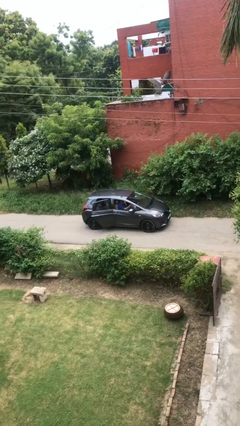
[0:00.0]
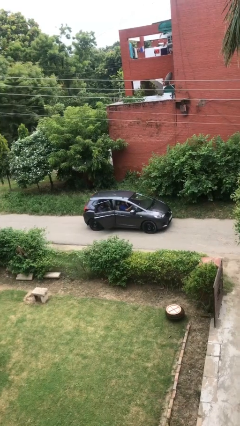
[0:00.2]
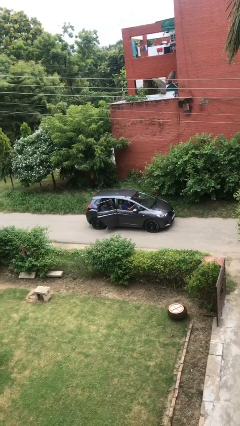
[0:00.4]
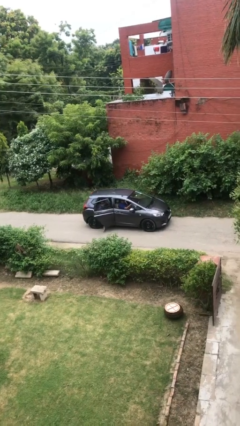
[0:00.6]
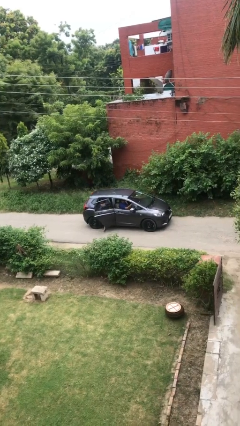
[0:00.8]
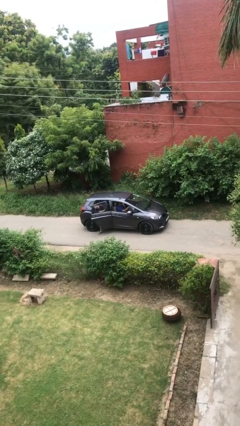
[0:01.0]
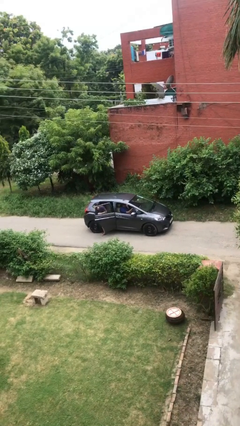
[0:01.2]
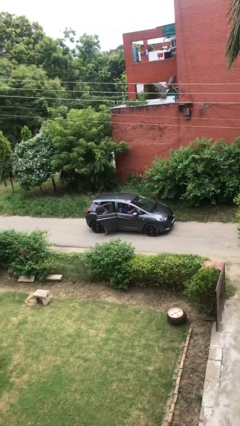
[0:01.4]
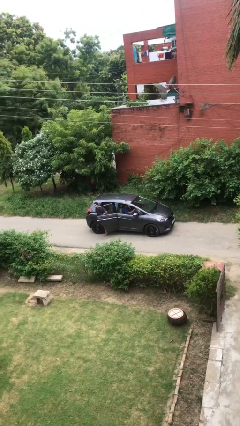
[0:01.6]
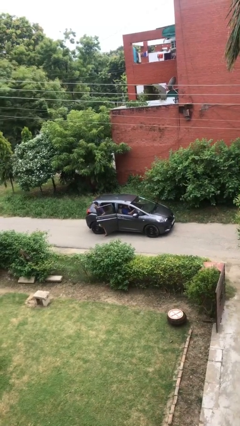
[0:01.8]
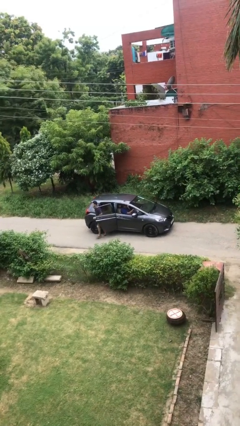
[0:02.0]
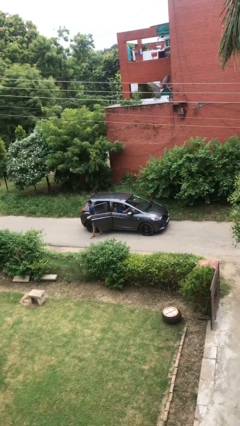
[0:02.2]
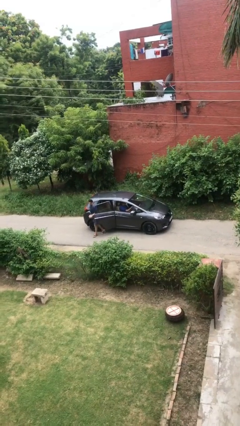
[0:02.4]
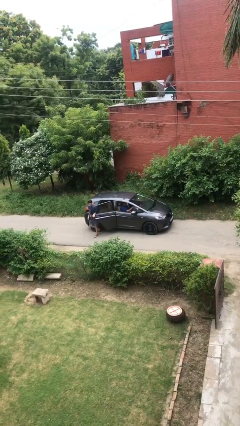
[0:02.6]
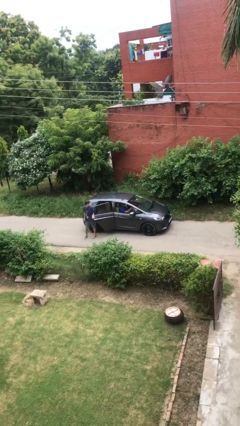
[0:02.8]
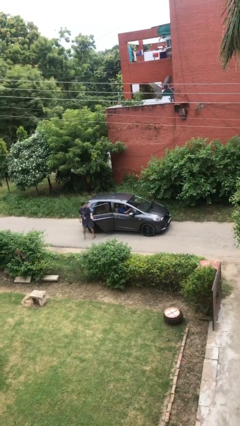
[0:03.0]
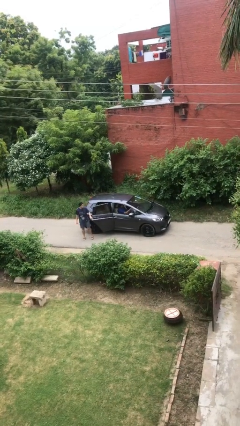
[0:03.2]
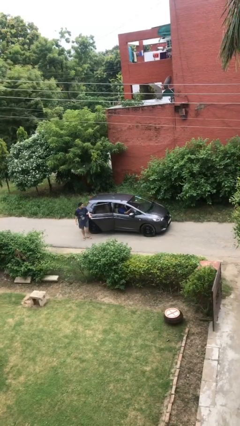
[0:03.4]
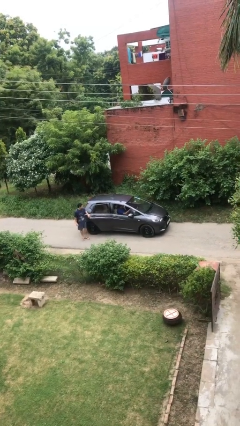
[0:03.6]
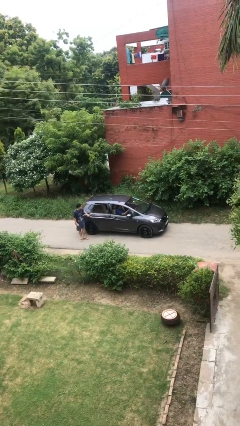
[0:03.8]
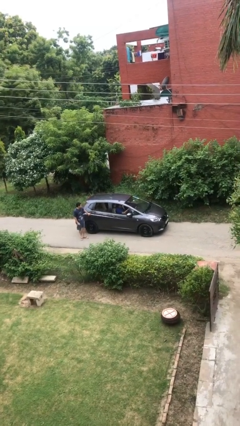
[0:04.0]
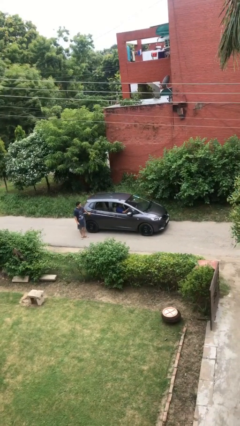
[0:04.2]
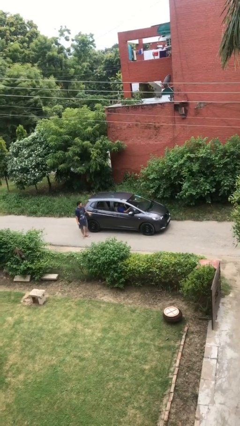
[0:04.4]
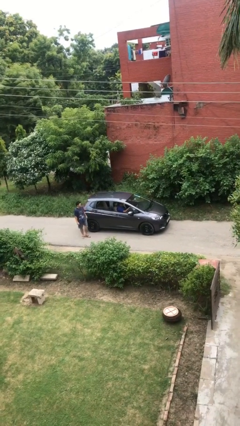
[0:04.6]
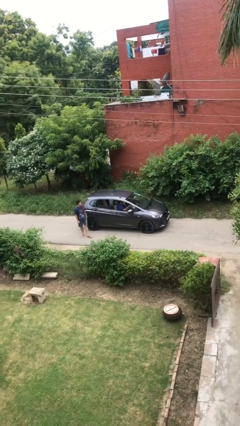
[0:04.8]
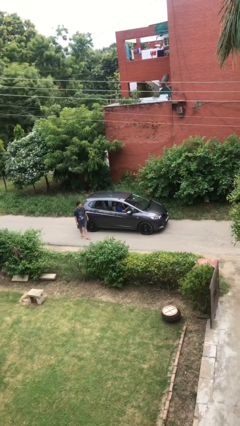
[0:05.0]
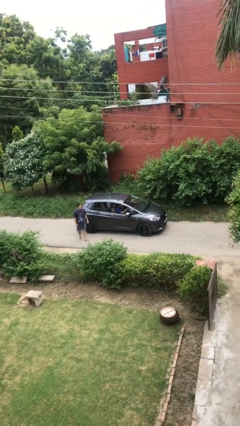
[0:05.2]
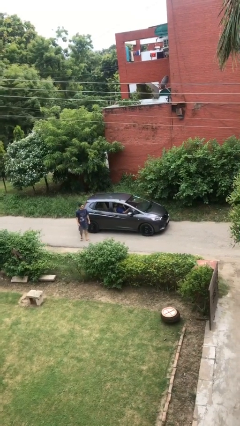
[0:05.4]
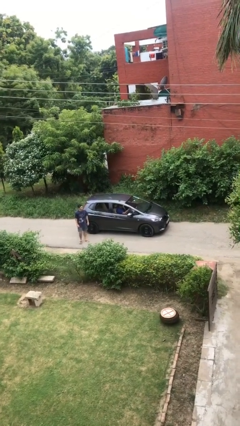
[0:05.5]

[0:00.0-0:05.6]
car drops off person

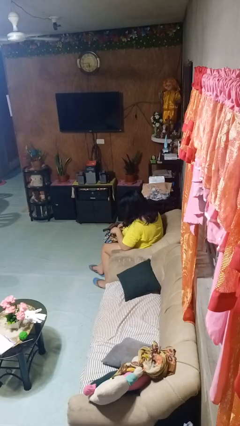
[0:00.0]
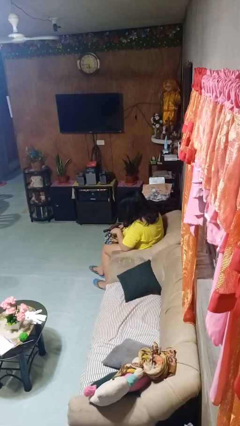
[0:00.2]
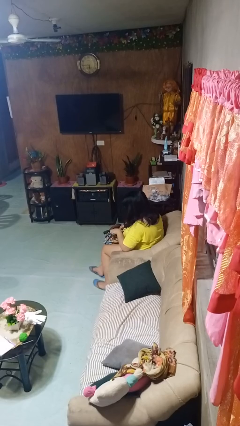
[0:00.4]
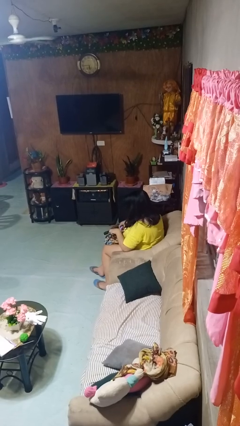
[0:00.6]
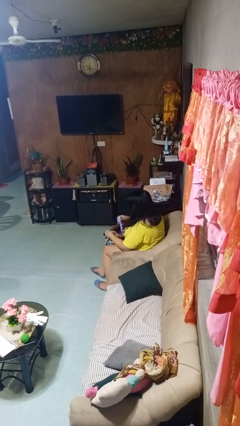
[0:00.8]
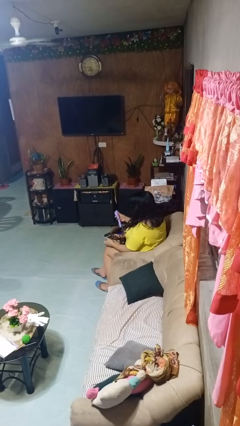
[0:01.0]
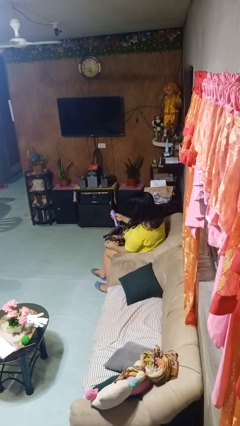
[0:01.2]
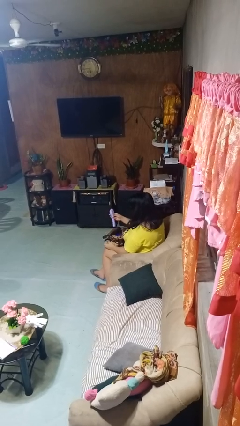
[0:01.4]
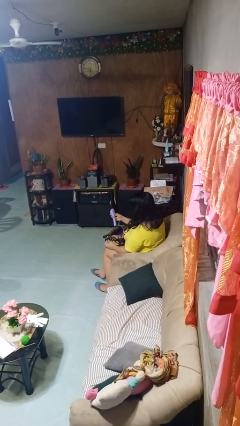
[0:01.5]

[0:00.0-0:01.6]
person takes object from backpack

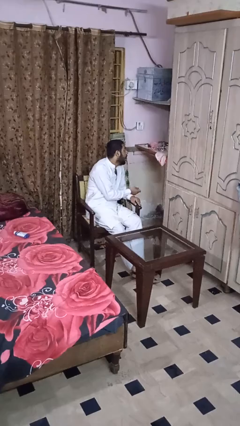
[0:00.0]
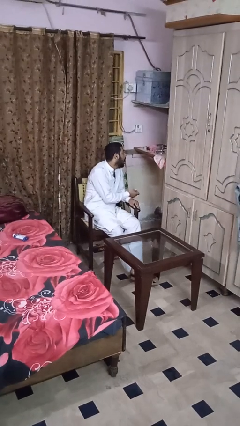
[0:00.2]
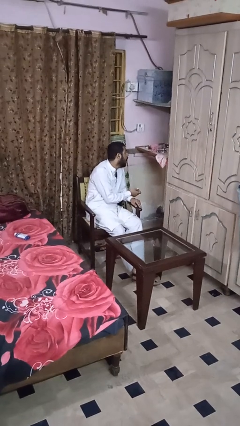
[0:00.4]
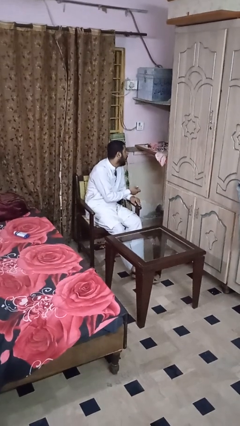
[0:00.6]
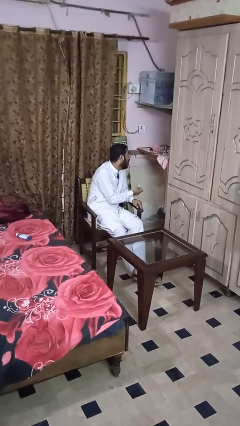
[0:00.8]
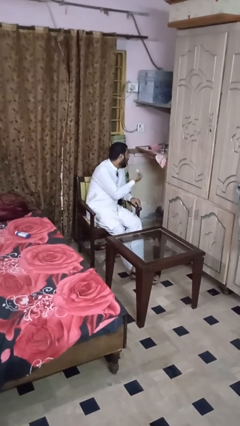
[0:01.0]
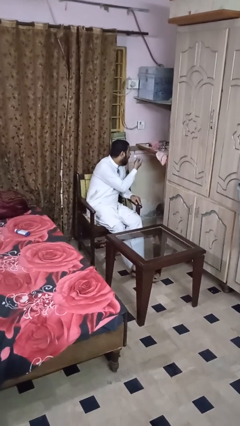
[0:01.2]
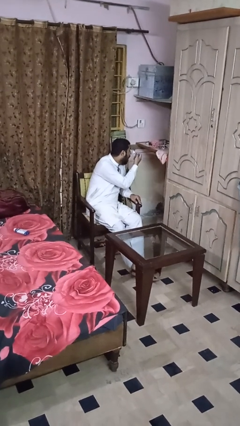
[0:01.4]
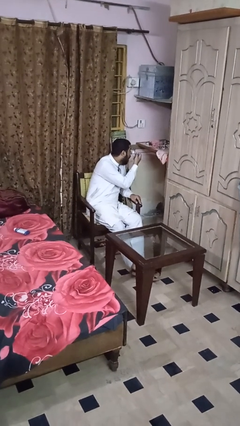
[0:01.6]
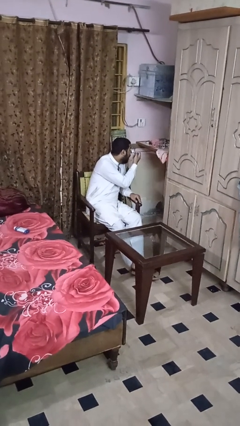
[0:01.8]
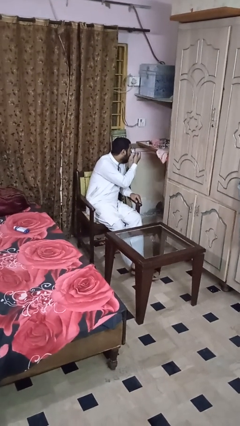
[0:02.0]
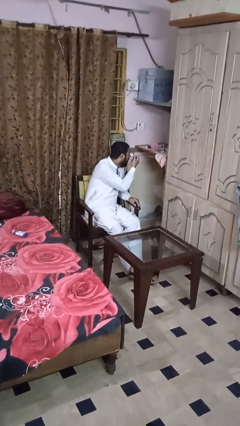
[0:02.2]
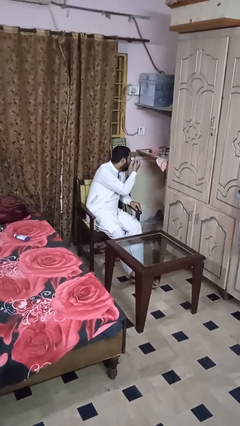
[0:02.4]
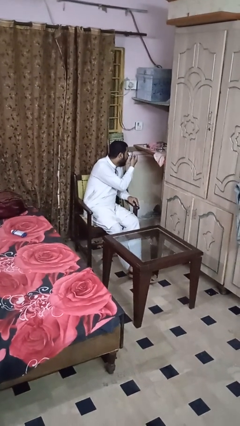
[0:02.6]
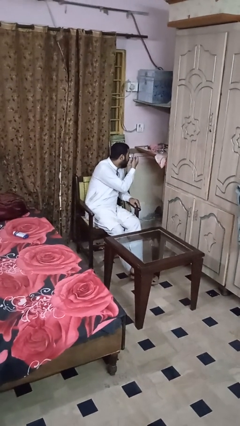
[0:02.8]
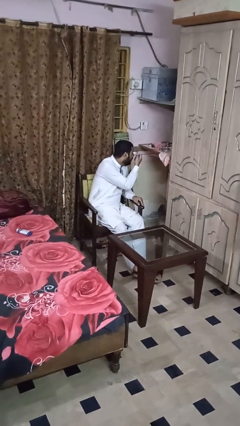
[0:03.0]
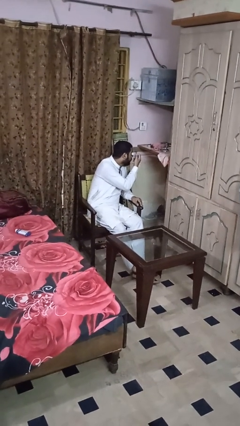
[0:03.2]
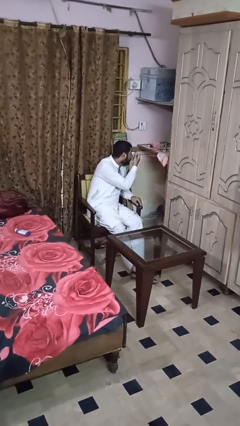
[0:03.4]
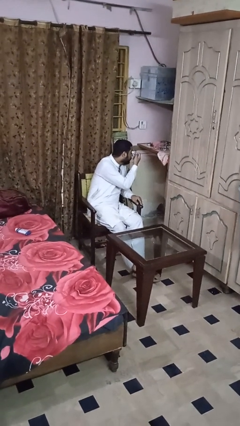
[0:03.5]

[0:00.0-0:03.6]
person applies eye makeup

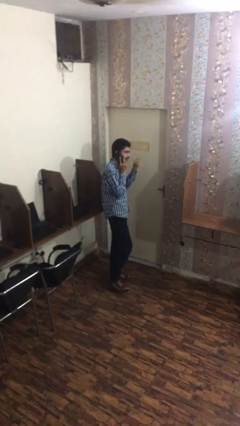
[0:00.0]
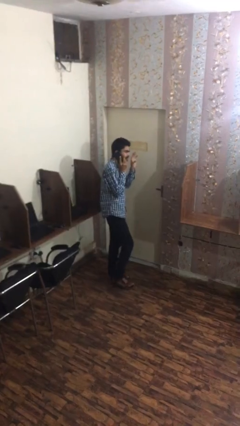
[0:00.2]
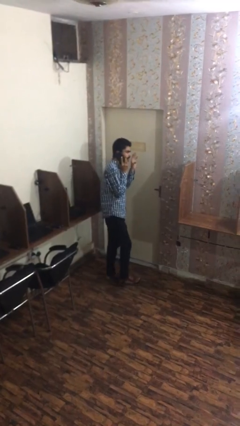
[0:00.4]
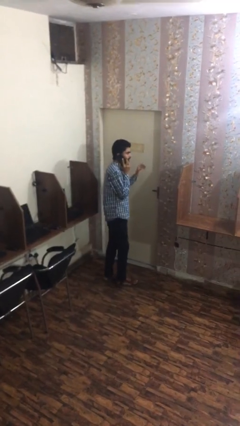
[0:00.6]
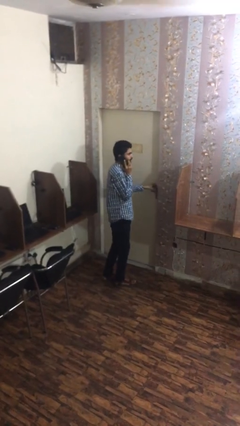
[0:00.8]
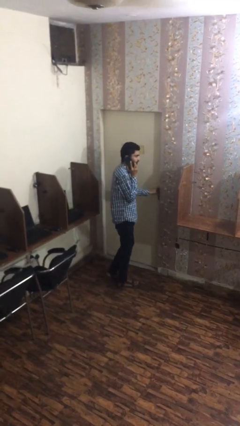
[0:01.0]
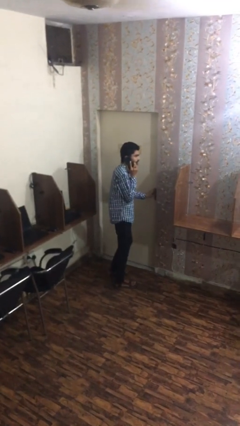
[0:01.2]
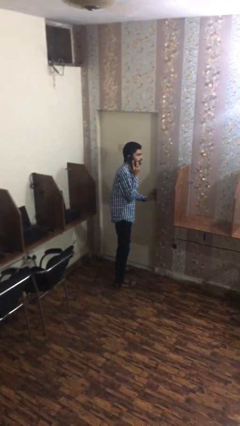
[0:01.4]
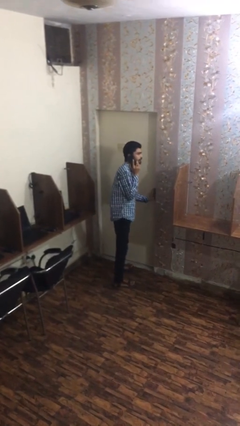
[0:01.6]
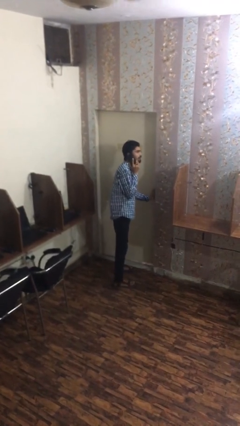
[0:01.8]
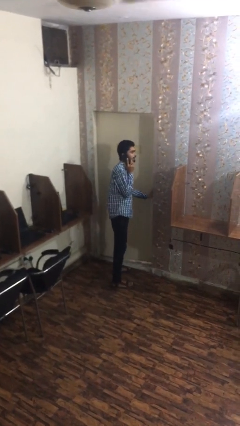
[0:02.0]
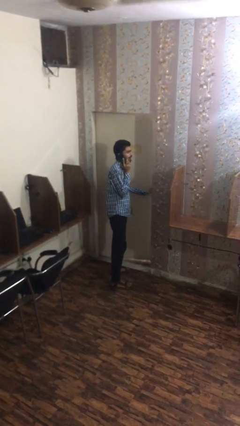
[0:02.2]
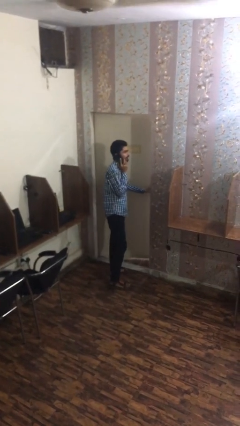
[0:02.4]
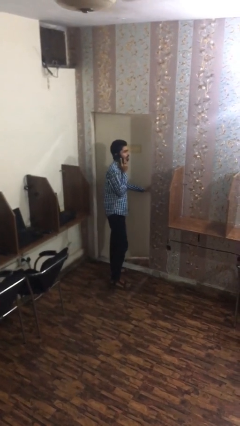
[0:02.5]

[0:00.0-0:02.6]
person opens facility door

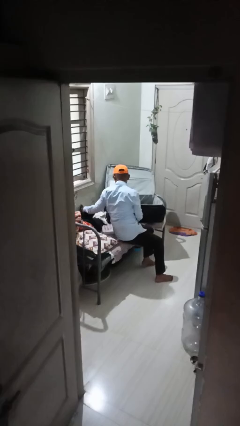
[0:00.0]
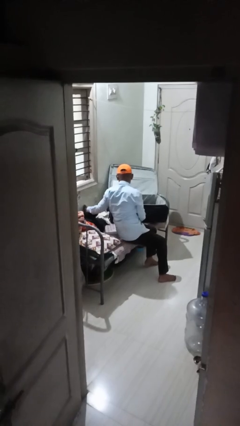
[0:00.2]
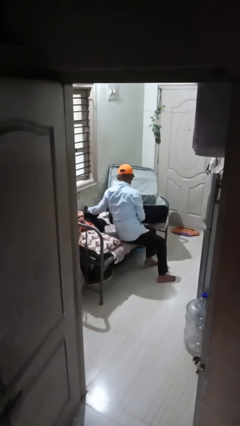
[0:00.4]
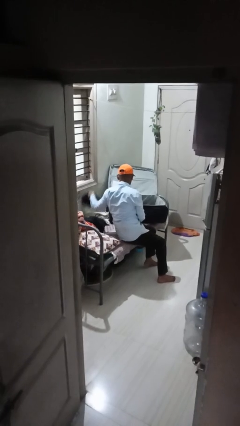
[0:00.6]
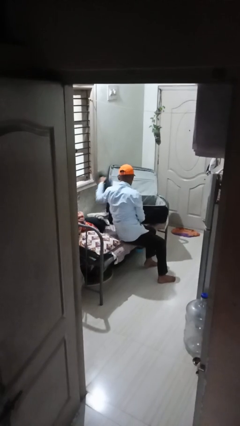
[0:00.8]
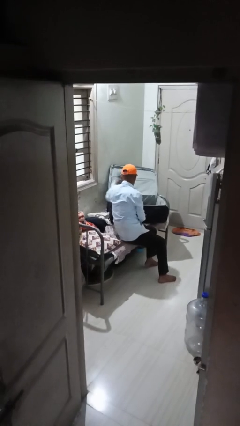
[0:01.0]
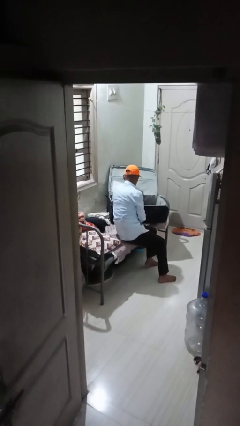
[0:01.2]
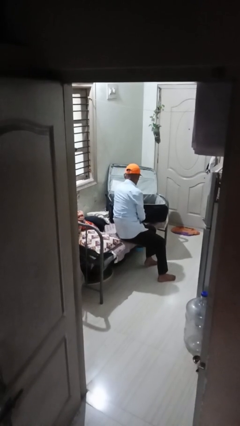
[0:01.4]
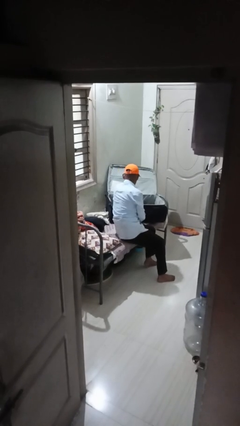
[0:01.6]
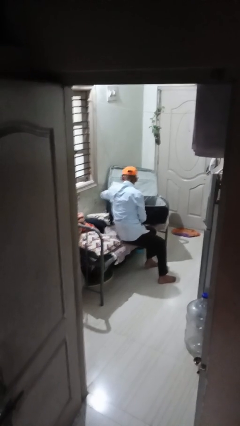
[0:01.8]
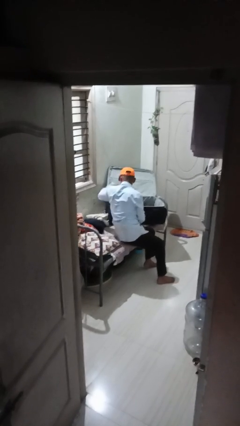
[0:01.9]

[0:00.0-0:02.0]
person loads clothes into suitcase

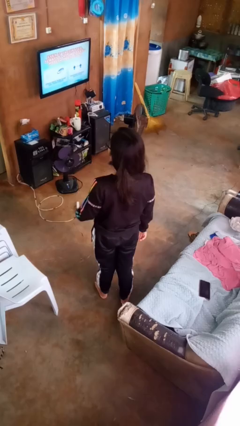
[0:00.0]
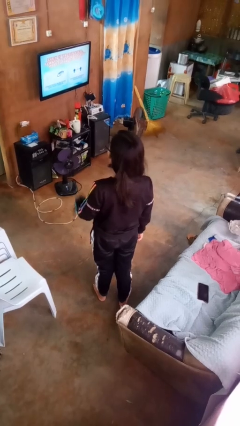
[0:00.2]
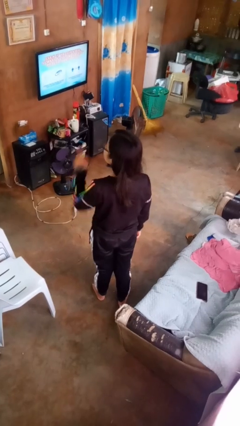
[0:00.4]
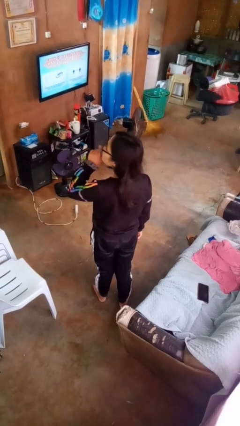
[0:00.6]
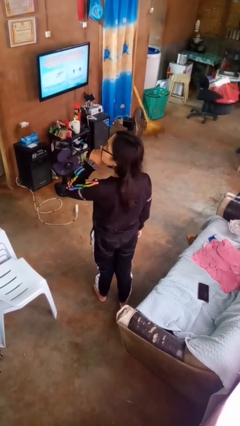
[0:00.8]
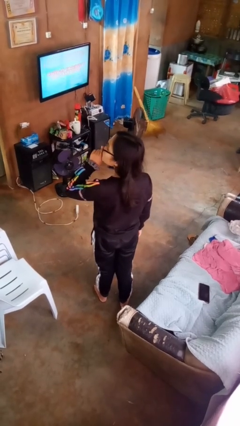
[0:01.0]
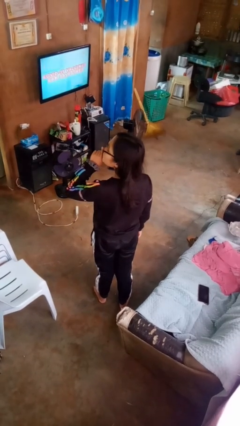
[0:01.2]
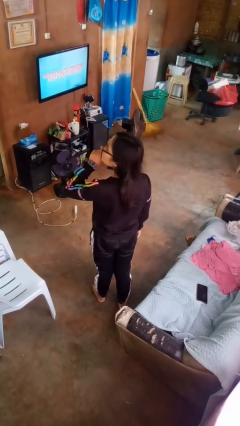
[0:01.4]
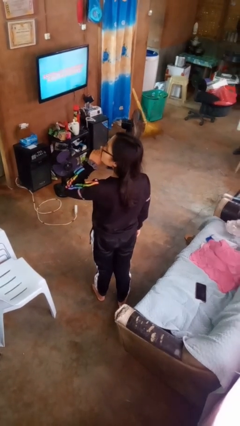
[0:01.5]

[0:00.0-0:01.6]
person gestures be quiet
